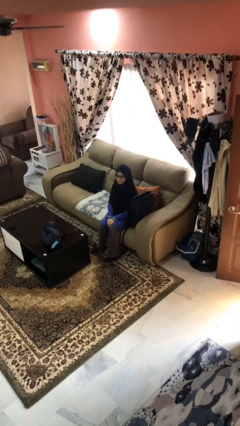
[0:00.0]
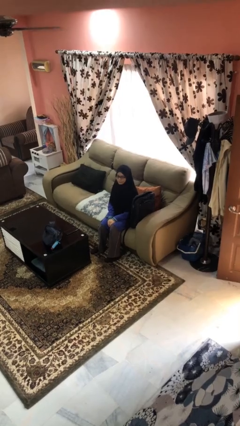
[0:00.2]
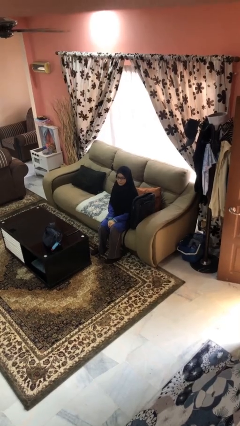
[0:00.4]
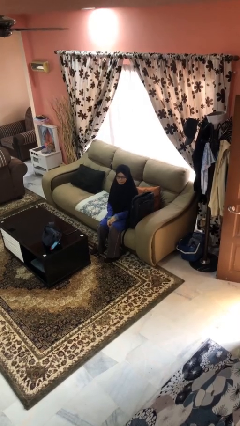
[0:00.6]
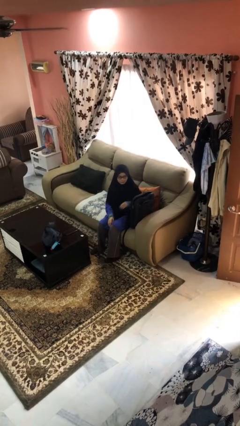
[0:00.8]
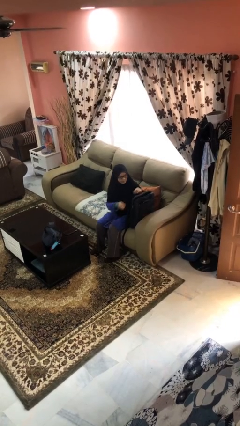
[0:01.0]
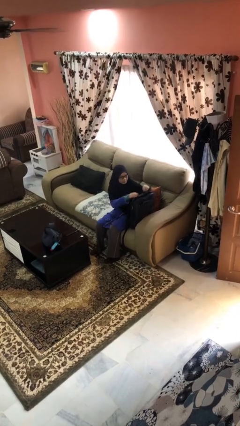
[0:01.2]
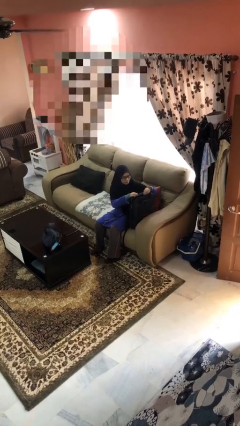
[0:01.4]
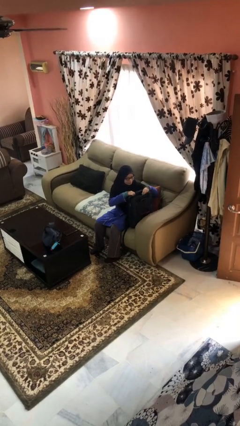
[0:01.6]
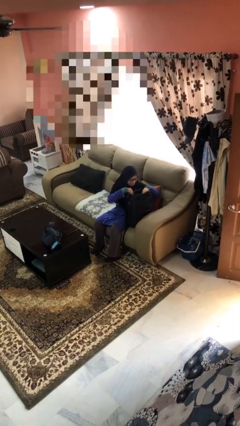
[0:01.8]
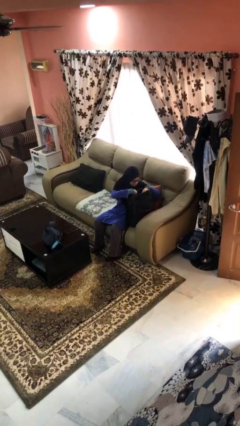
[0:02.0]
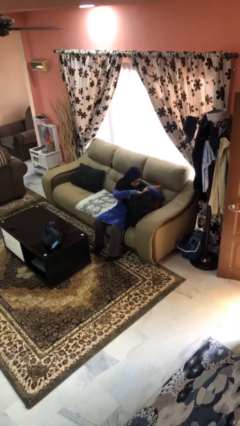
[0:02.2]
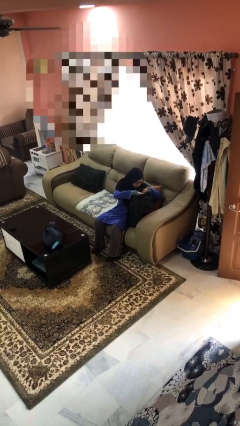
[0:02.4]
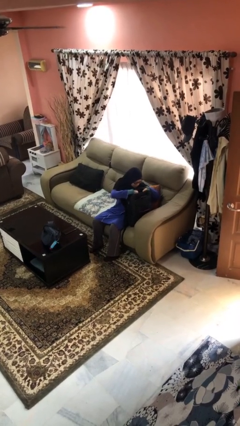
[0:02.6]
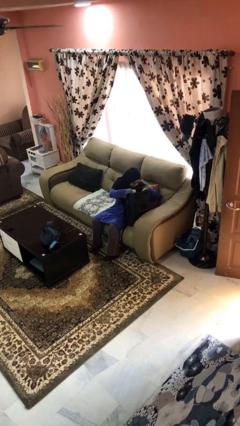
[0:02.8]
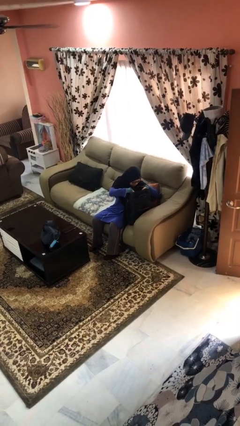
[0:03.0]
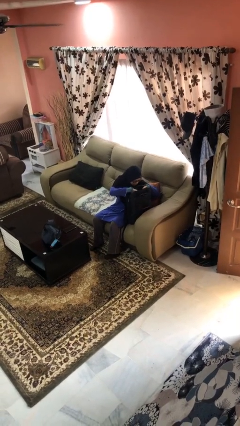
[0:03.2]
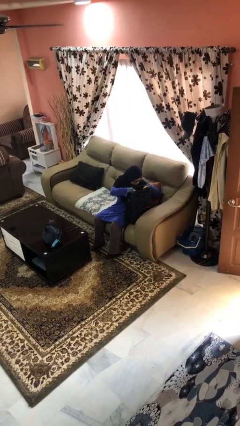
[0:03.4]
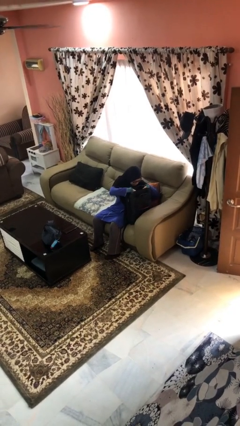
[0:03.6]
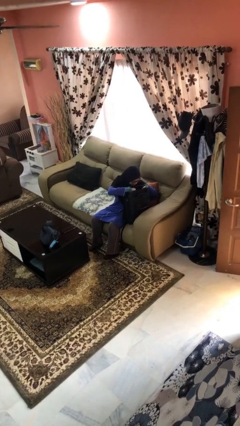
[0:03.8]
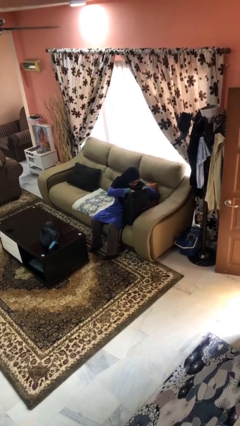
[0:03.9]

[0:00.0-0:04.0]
person searches in backpack

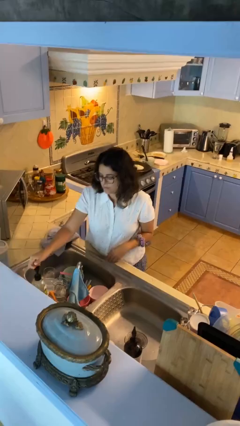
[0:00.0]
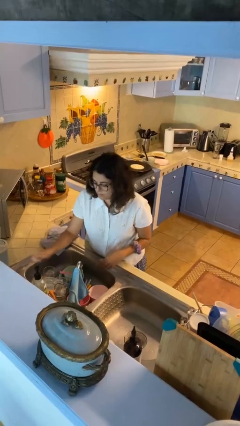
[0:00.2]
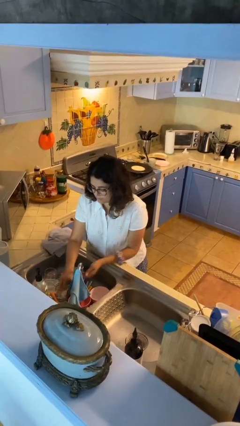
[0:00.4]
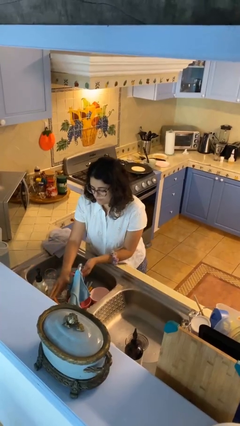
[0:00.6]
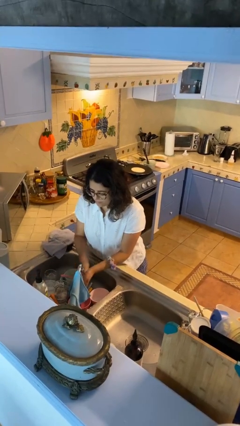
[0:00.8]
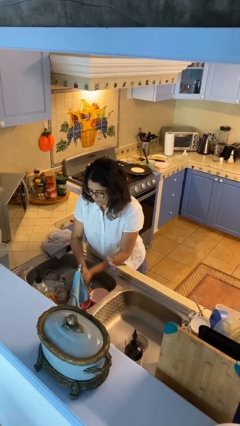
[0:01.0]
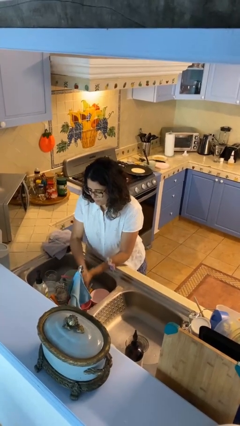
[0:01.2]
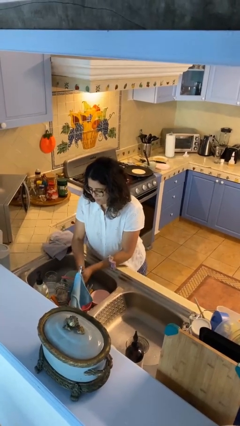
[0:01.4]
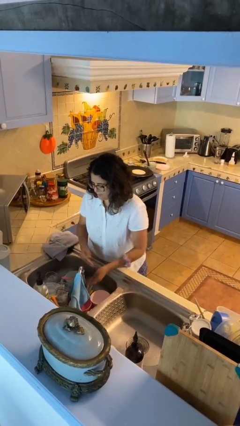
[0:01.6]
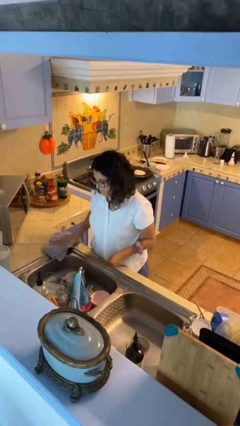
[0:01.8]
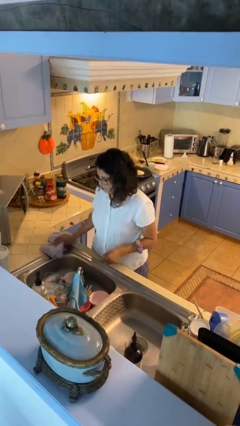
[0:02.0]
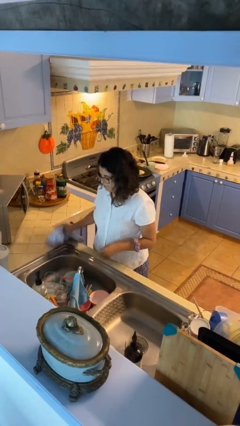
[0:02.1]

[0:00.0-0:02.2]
person washes hands

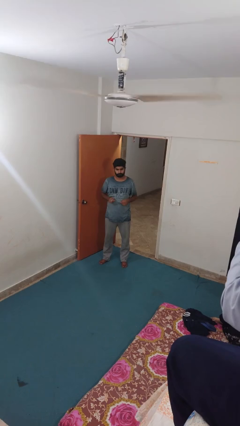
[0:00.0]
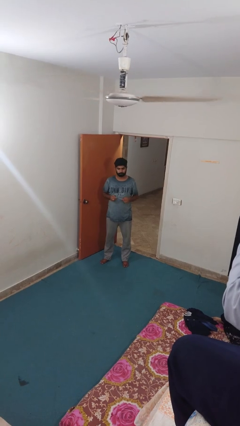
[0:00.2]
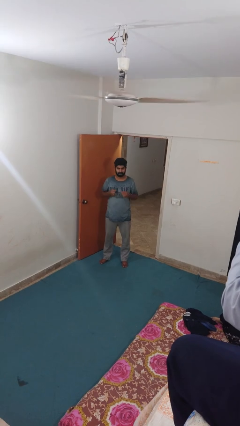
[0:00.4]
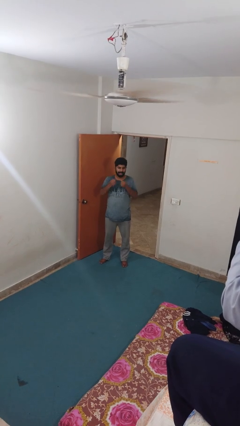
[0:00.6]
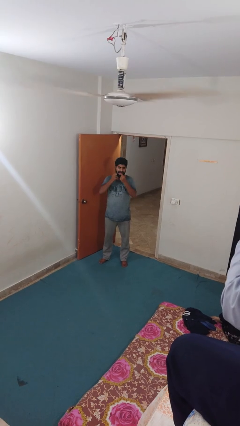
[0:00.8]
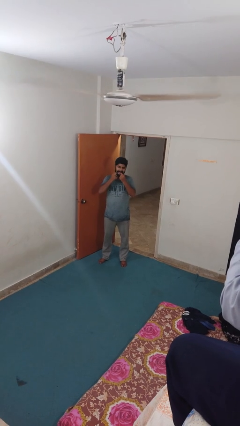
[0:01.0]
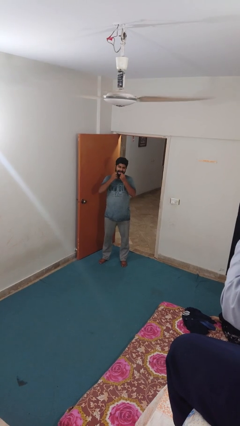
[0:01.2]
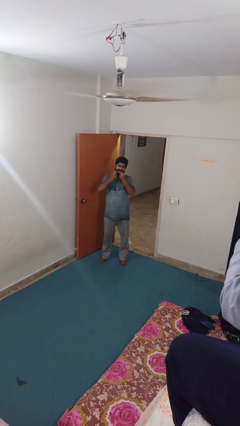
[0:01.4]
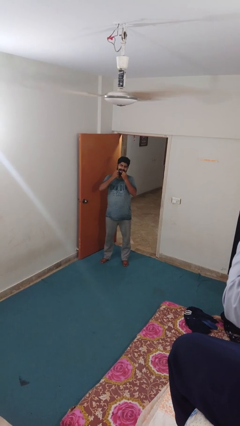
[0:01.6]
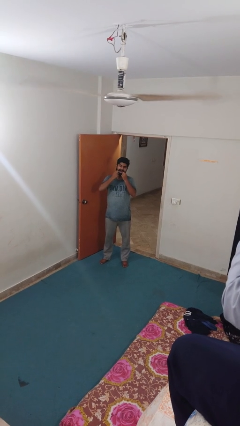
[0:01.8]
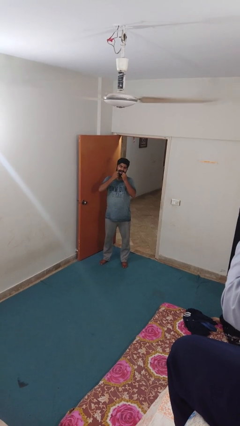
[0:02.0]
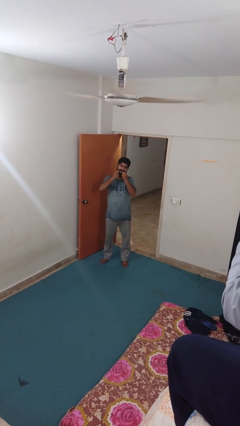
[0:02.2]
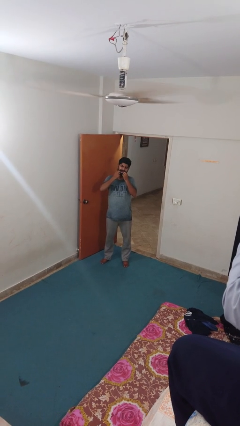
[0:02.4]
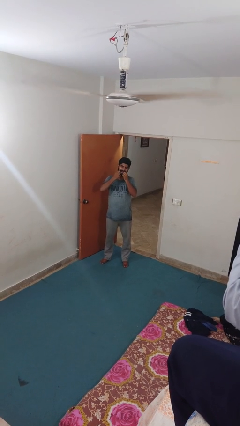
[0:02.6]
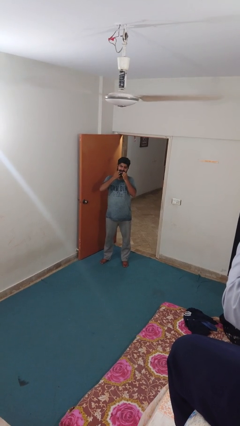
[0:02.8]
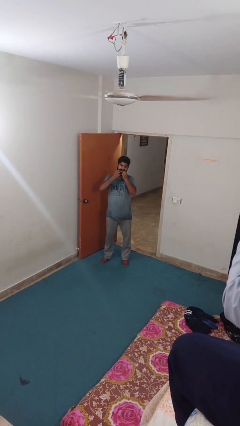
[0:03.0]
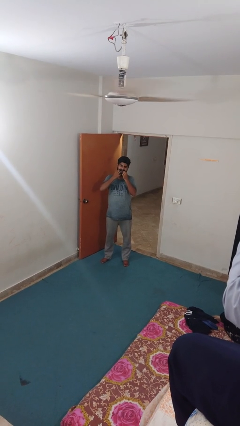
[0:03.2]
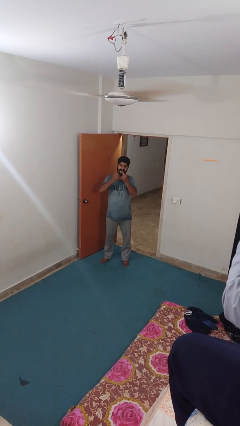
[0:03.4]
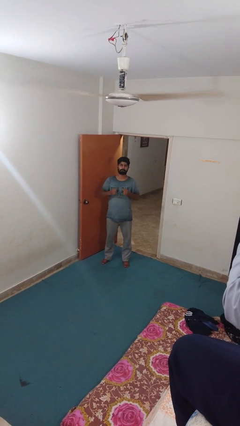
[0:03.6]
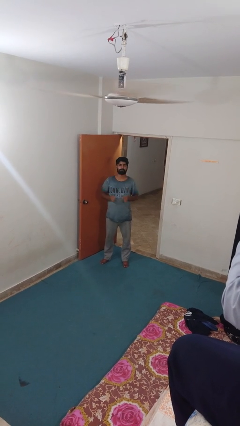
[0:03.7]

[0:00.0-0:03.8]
person flosses

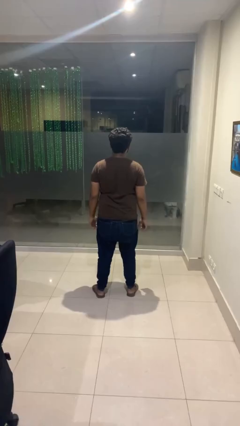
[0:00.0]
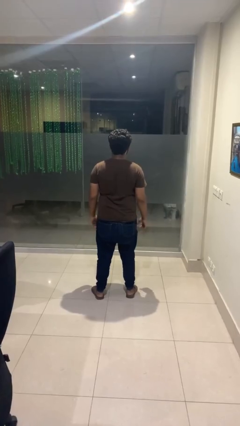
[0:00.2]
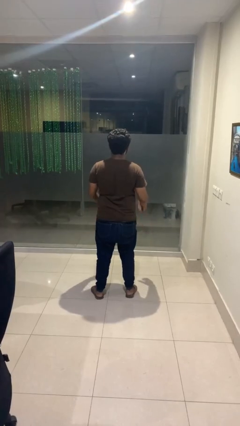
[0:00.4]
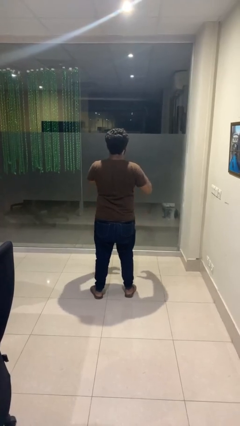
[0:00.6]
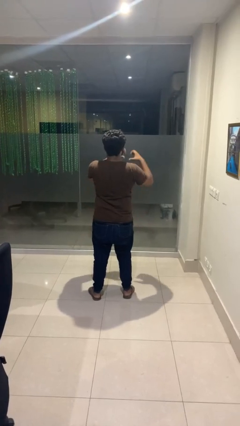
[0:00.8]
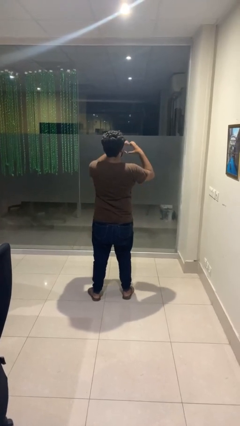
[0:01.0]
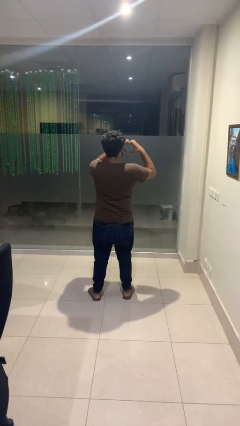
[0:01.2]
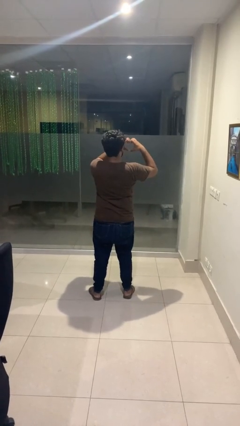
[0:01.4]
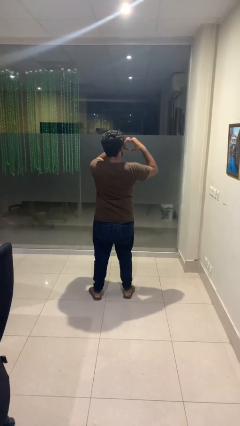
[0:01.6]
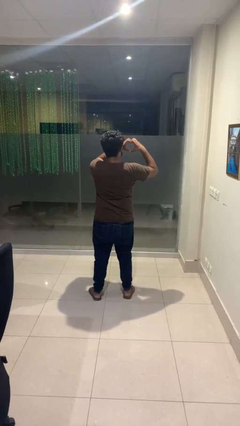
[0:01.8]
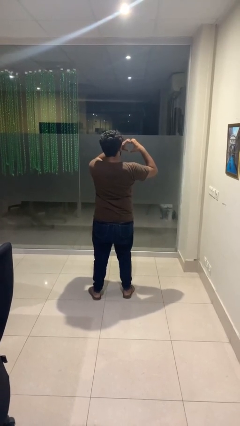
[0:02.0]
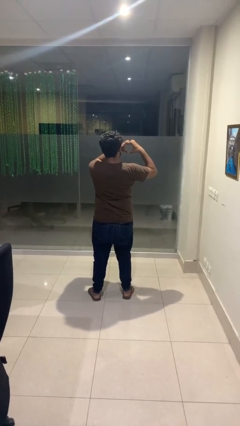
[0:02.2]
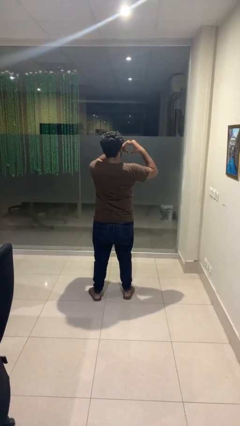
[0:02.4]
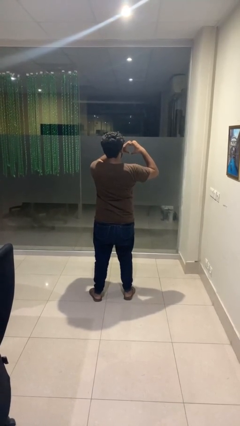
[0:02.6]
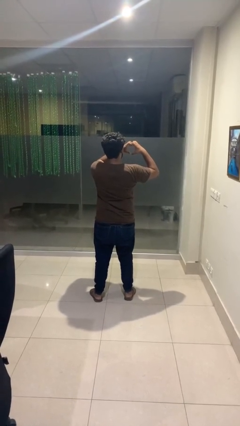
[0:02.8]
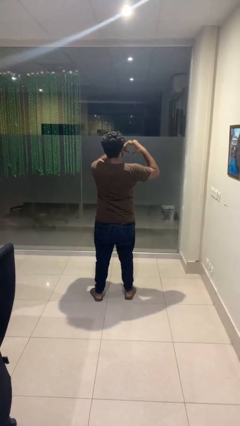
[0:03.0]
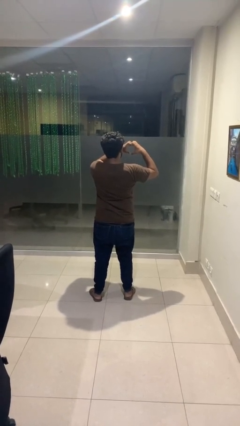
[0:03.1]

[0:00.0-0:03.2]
person gestures heart

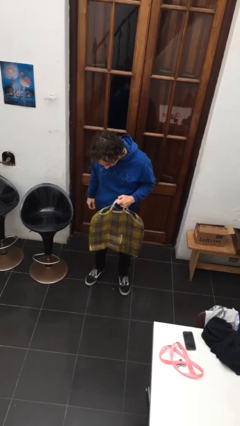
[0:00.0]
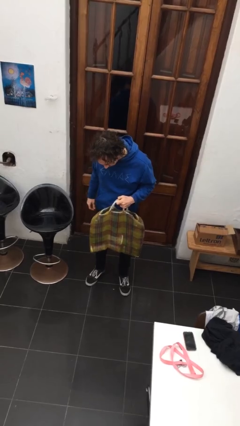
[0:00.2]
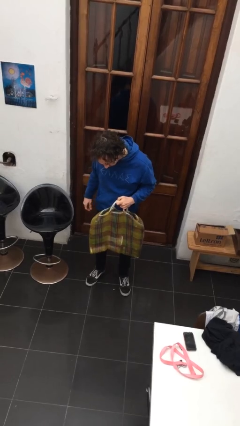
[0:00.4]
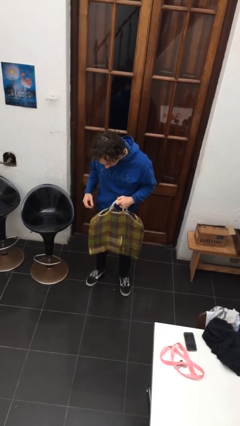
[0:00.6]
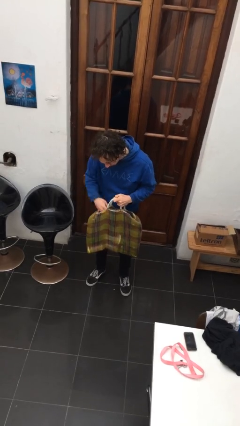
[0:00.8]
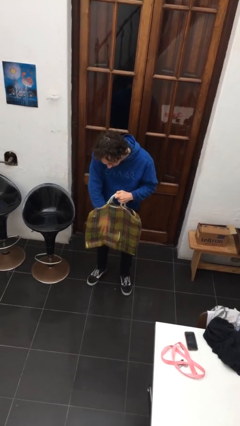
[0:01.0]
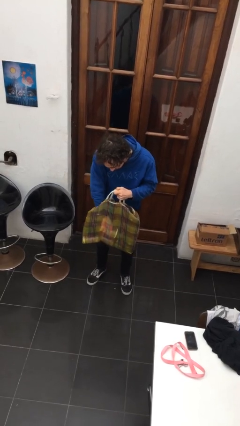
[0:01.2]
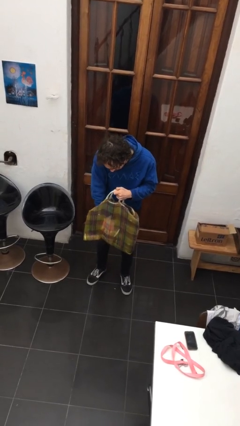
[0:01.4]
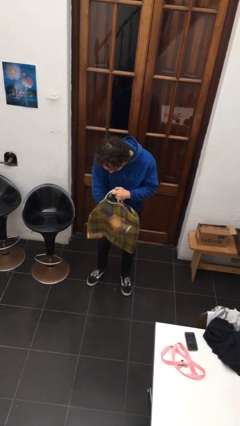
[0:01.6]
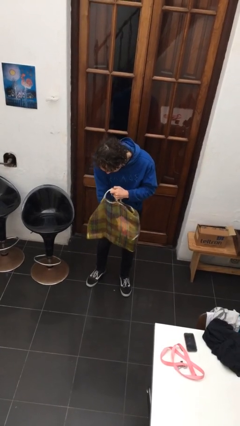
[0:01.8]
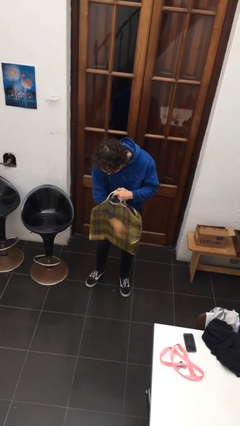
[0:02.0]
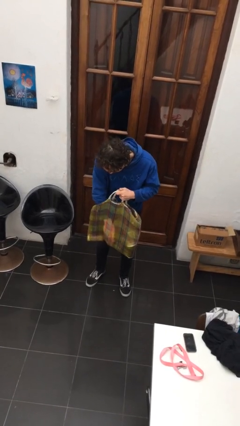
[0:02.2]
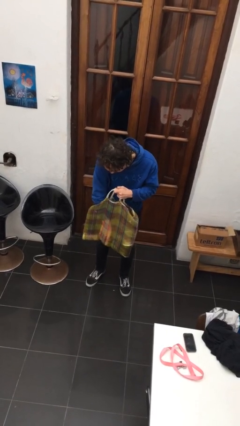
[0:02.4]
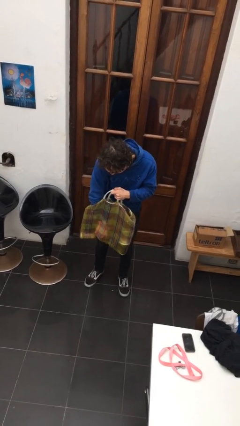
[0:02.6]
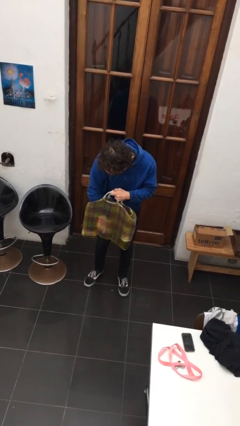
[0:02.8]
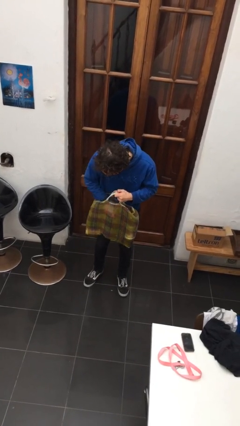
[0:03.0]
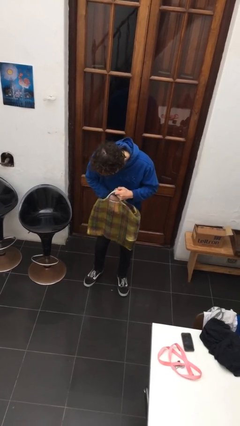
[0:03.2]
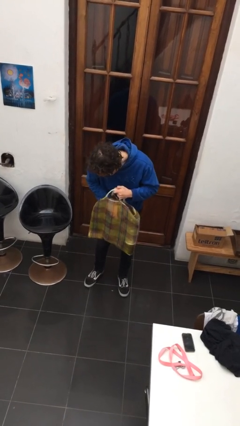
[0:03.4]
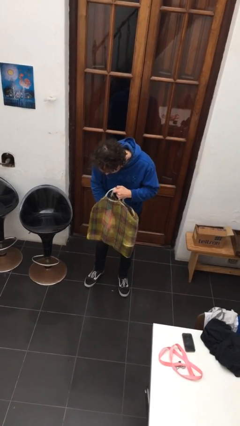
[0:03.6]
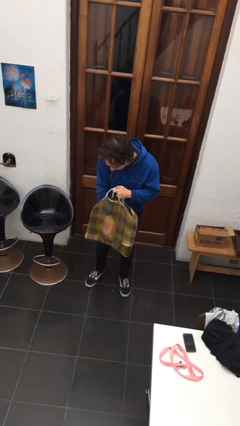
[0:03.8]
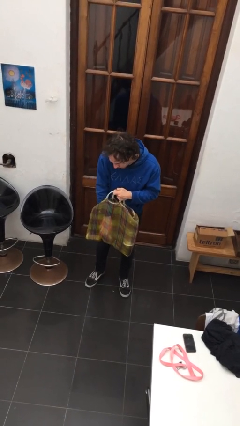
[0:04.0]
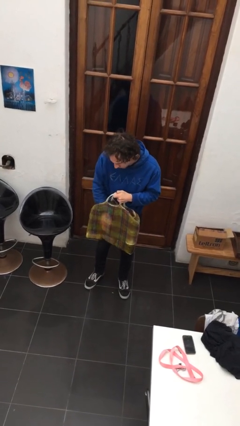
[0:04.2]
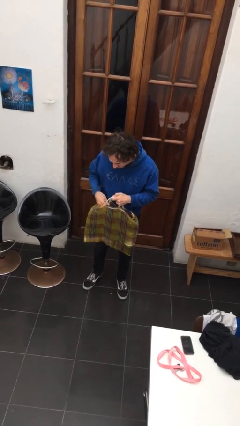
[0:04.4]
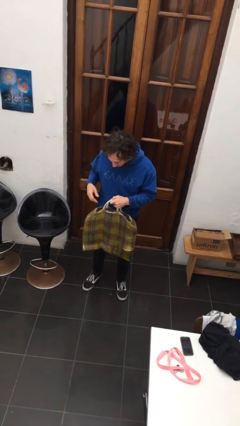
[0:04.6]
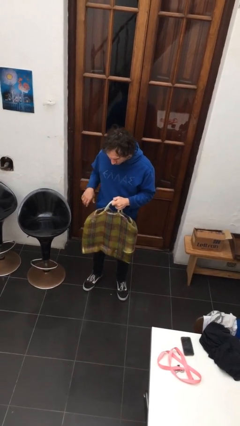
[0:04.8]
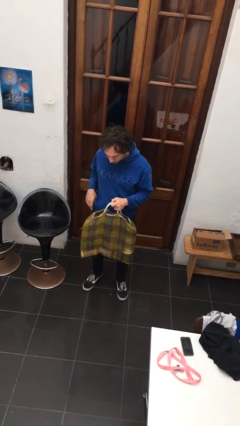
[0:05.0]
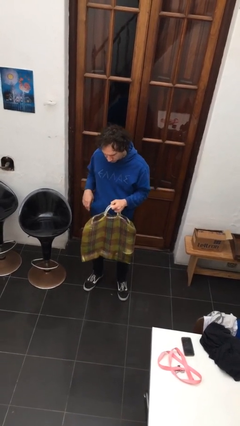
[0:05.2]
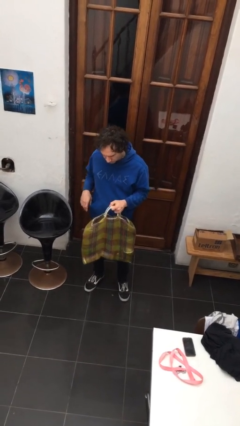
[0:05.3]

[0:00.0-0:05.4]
person searches in bag
